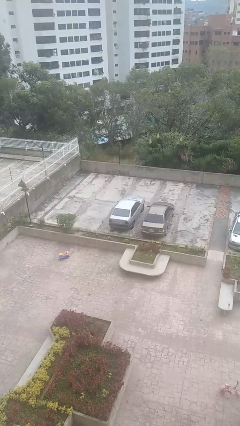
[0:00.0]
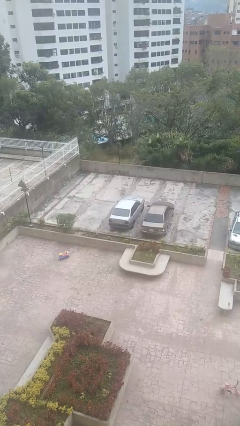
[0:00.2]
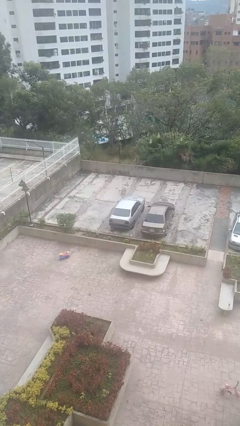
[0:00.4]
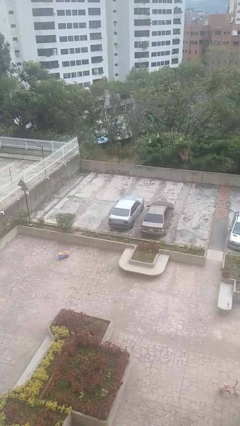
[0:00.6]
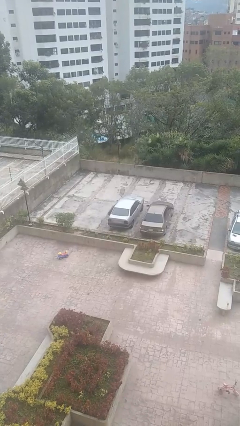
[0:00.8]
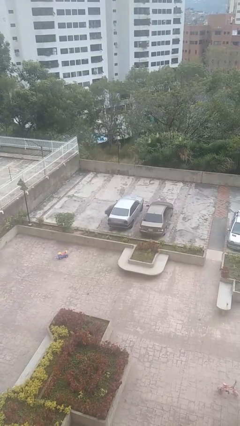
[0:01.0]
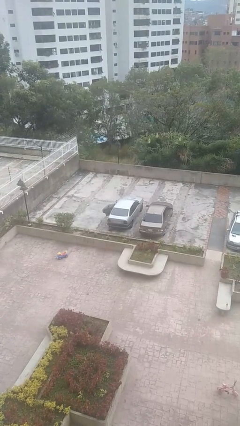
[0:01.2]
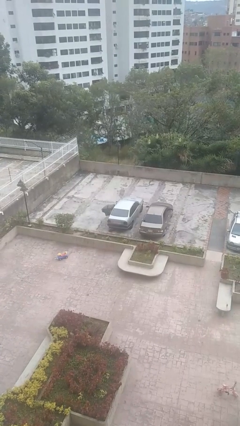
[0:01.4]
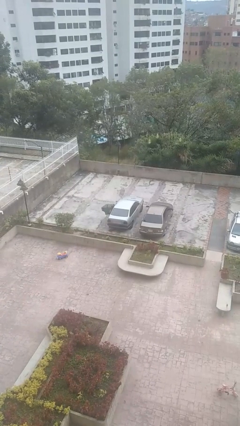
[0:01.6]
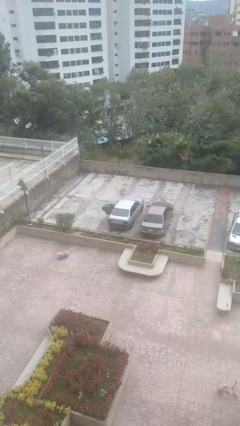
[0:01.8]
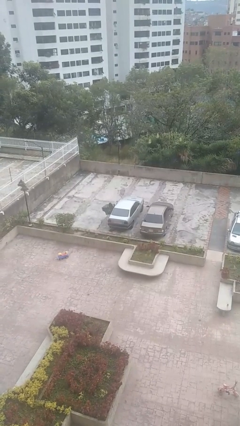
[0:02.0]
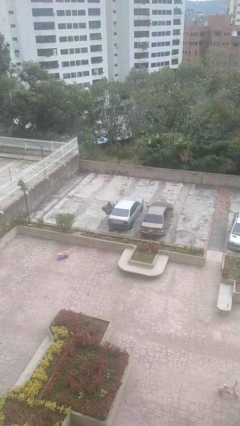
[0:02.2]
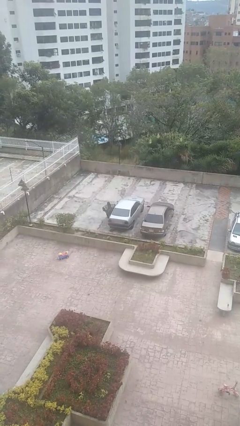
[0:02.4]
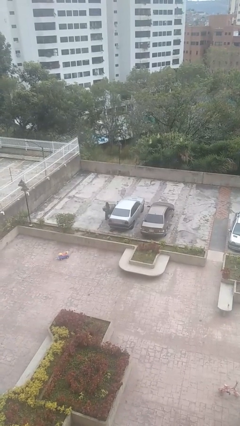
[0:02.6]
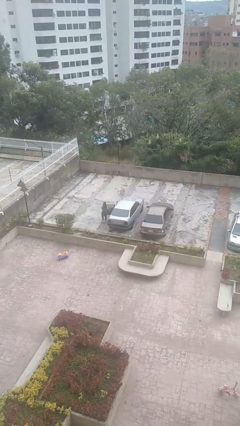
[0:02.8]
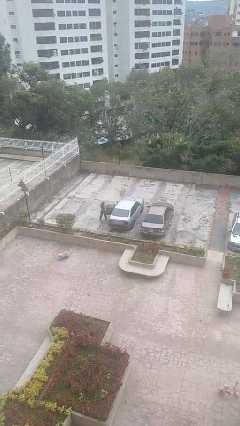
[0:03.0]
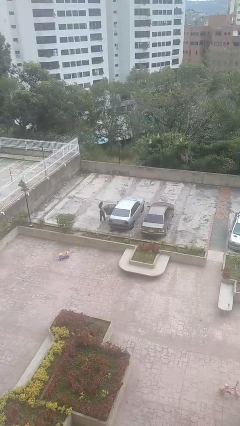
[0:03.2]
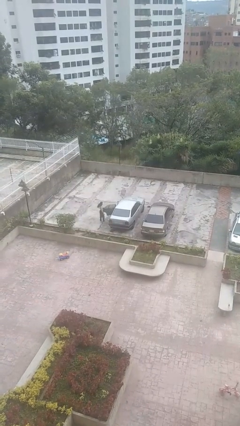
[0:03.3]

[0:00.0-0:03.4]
car drops off person

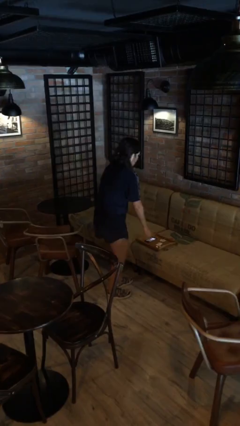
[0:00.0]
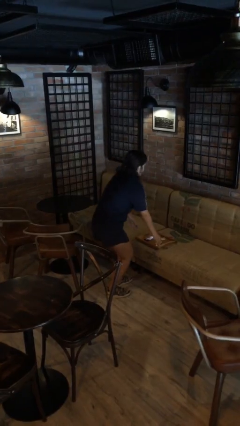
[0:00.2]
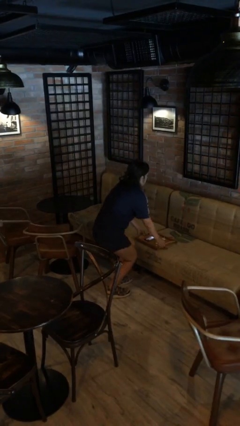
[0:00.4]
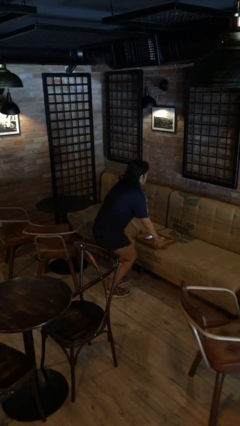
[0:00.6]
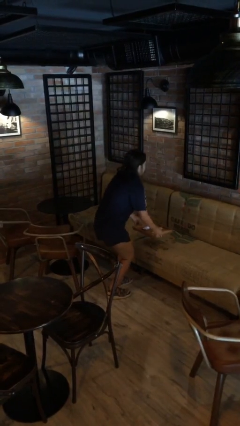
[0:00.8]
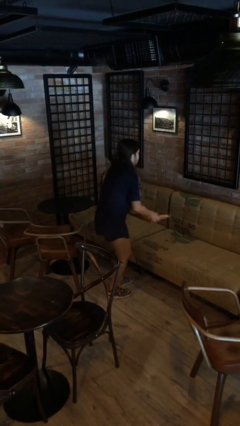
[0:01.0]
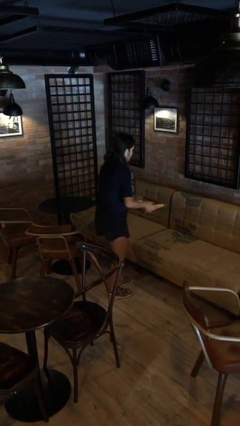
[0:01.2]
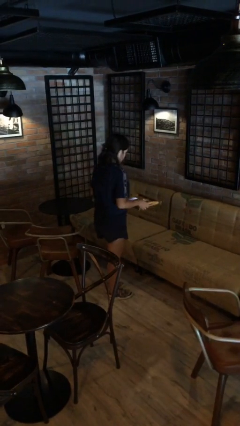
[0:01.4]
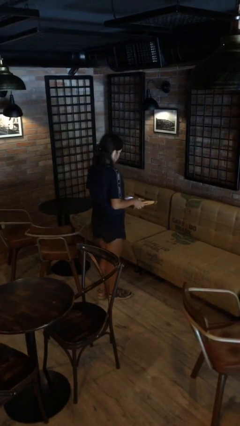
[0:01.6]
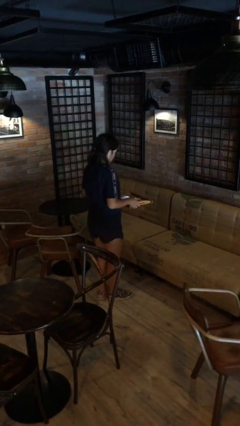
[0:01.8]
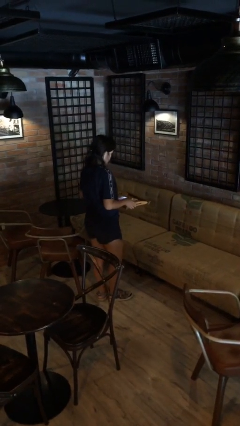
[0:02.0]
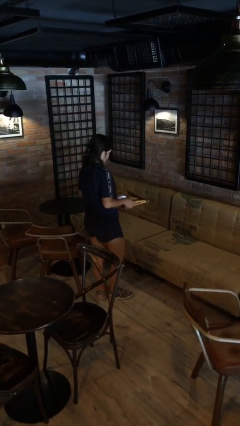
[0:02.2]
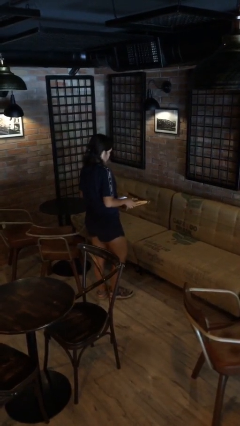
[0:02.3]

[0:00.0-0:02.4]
person picks up object from couch

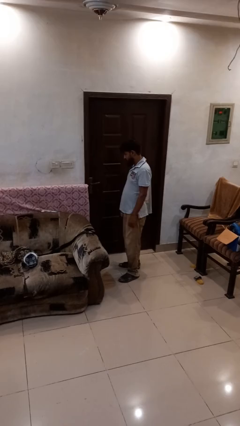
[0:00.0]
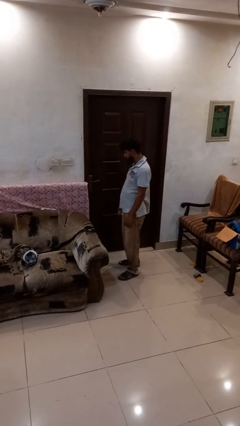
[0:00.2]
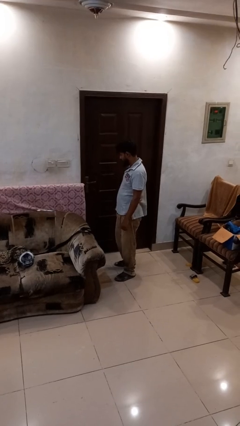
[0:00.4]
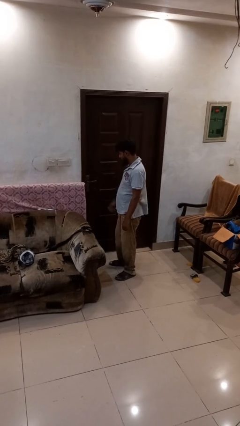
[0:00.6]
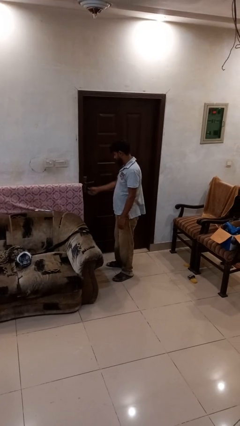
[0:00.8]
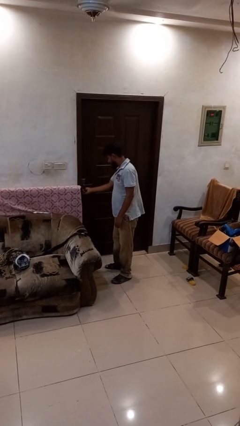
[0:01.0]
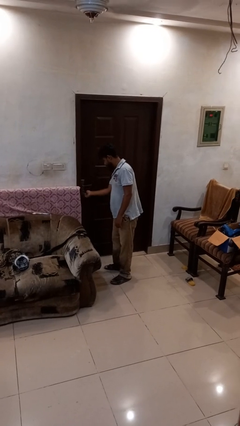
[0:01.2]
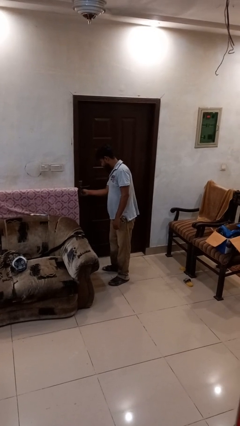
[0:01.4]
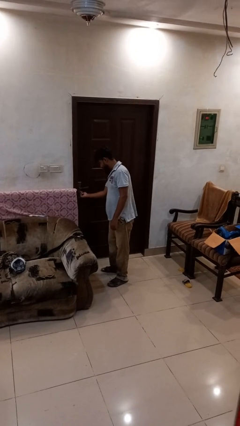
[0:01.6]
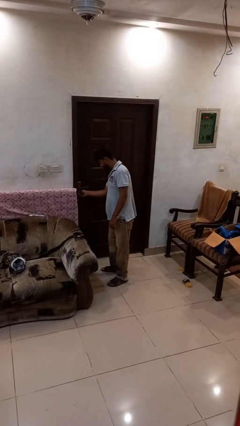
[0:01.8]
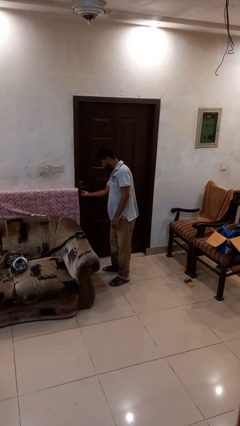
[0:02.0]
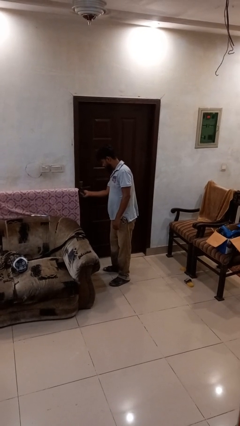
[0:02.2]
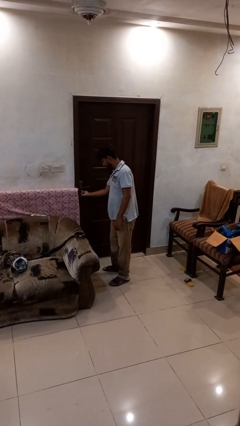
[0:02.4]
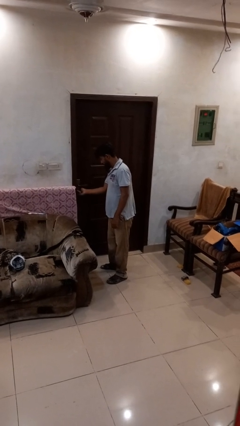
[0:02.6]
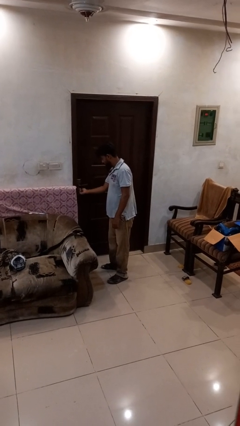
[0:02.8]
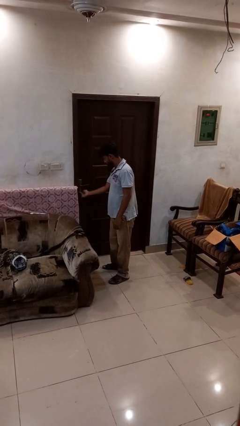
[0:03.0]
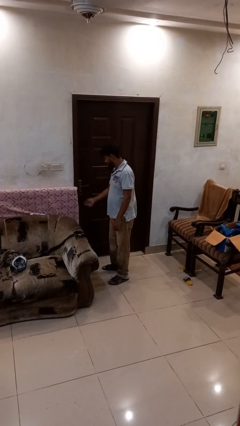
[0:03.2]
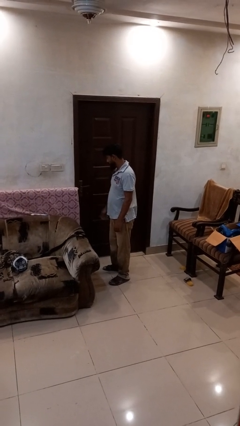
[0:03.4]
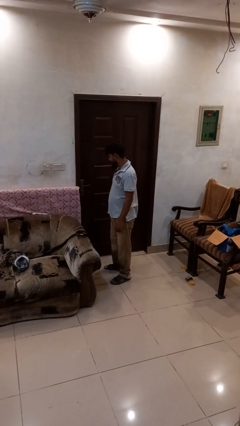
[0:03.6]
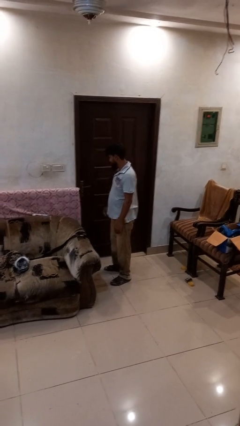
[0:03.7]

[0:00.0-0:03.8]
person unlocks door with keys

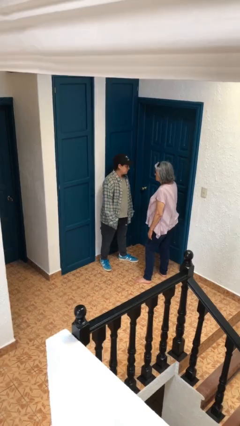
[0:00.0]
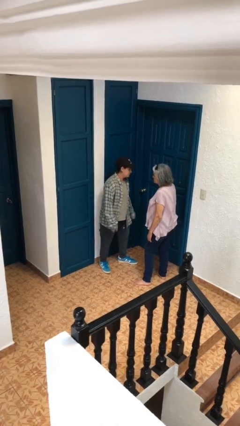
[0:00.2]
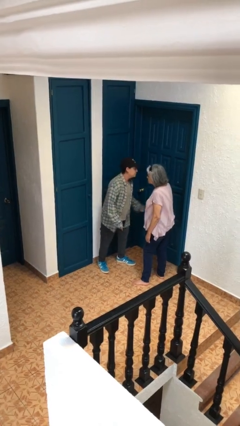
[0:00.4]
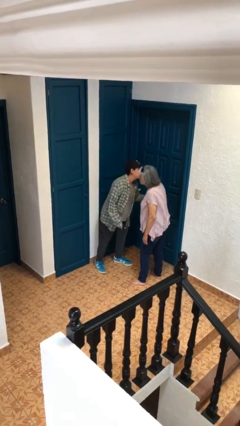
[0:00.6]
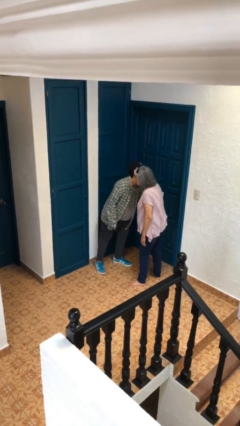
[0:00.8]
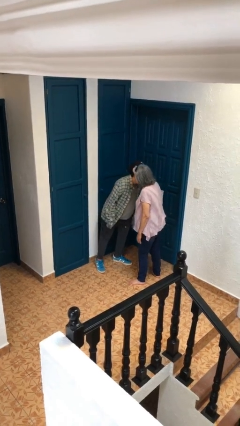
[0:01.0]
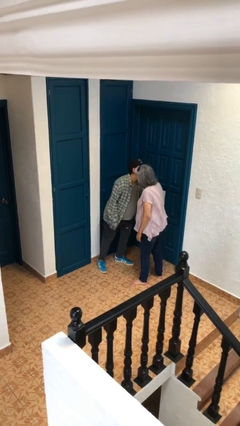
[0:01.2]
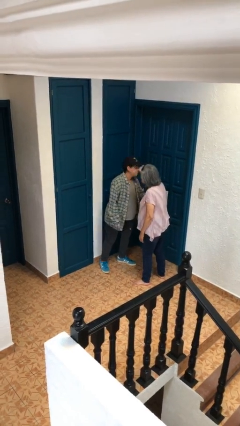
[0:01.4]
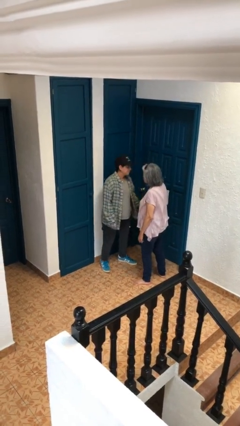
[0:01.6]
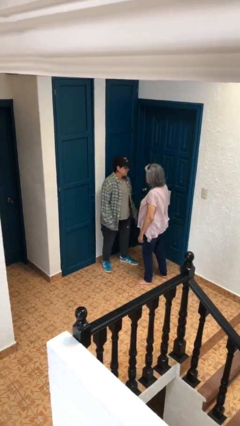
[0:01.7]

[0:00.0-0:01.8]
person kisses cheek of person

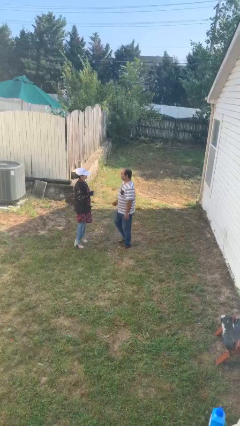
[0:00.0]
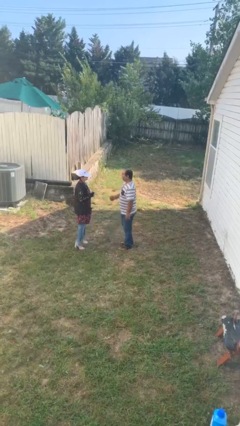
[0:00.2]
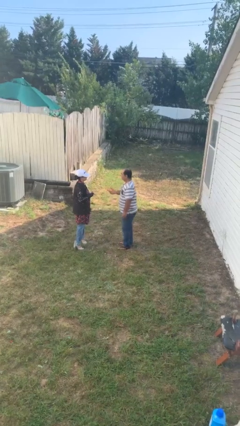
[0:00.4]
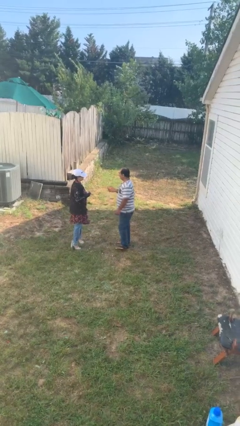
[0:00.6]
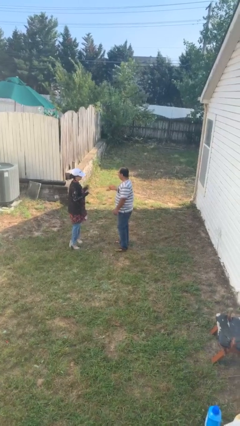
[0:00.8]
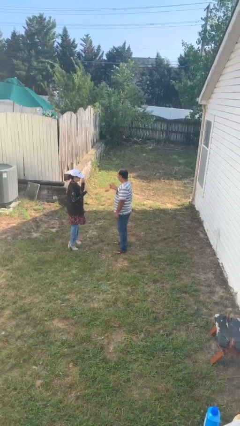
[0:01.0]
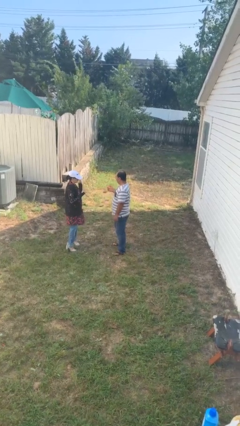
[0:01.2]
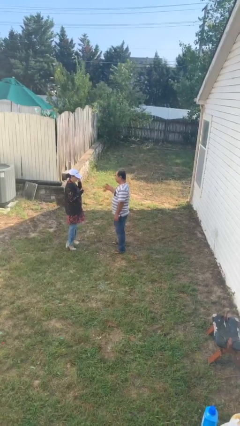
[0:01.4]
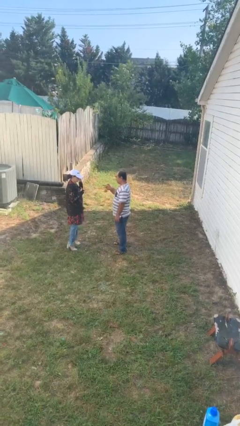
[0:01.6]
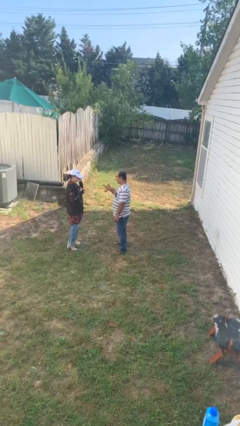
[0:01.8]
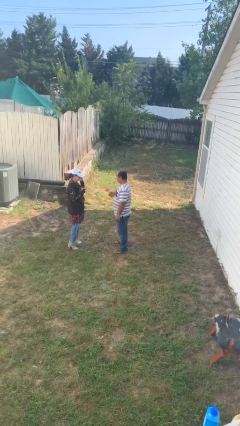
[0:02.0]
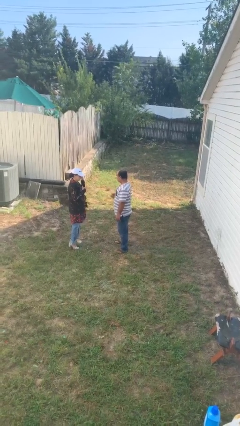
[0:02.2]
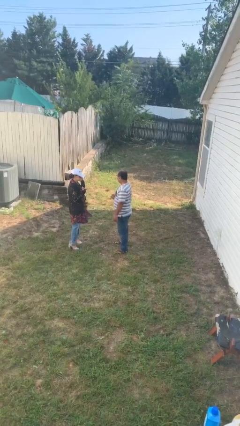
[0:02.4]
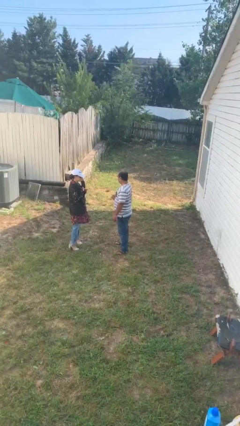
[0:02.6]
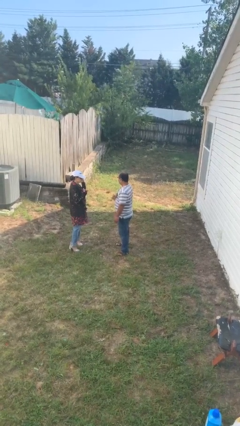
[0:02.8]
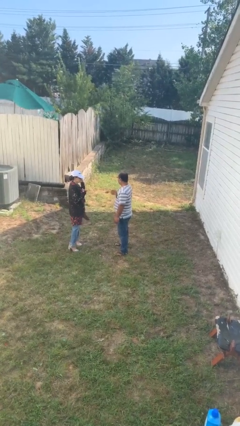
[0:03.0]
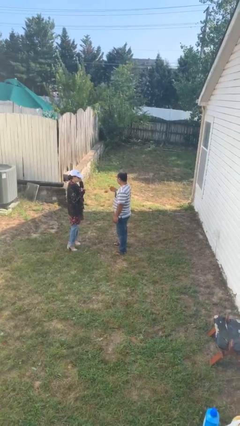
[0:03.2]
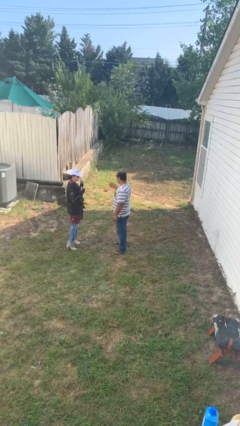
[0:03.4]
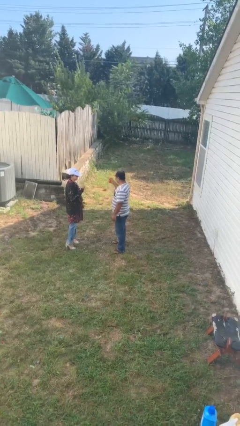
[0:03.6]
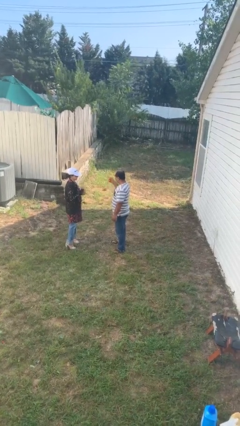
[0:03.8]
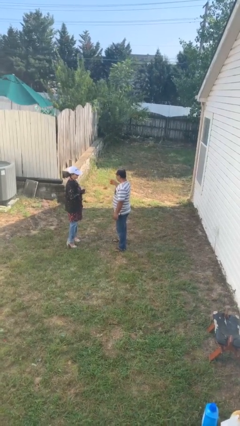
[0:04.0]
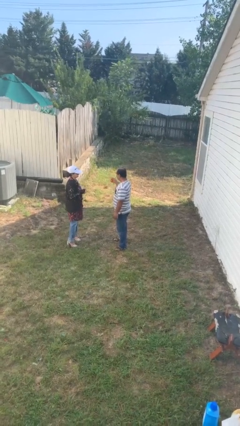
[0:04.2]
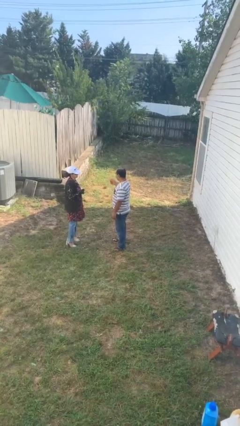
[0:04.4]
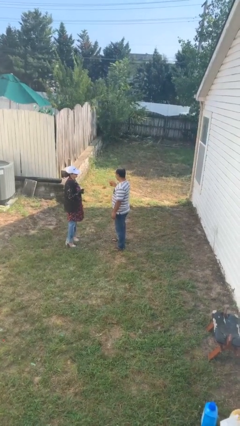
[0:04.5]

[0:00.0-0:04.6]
person talks to person

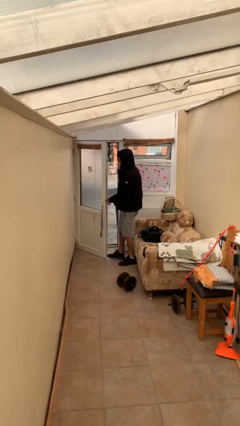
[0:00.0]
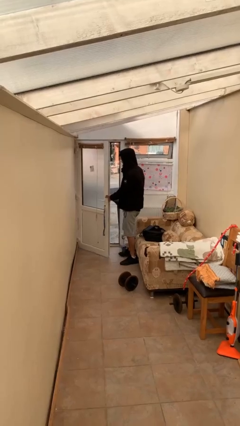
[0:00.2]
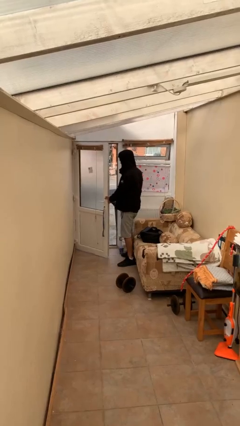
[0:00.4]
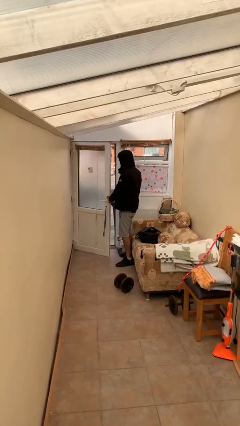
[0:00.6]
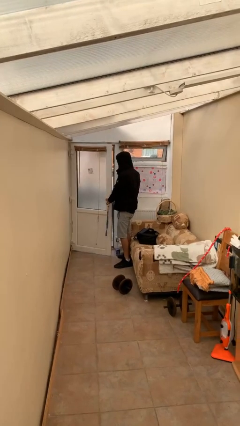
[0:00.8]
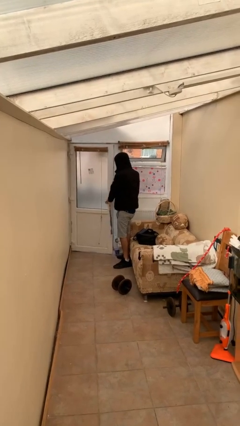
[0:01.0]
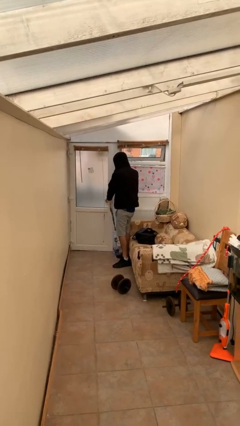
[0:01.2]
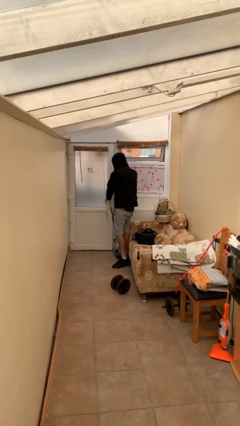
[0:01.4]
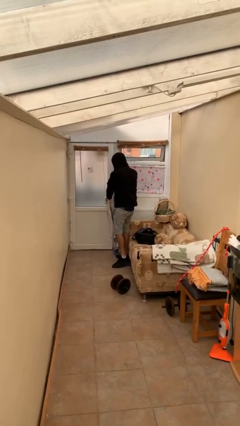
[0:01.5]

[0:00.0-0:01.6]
person closes facility door
